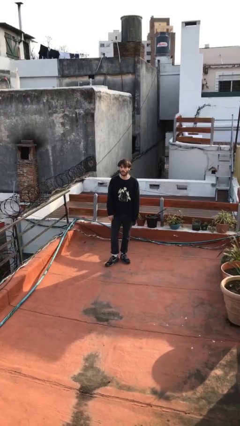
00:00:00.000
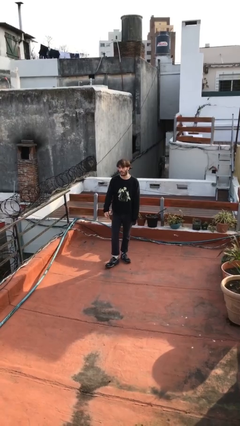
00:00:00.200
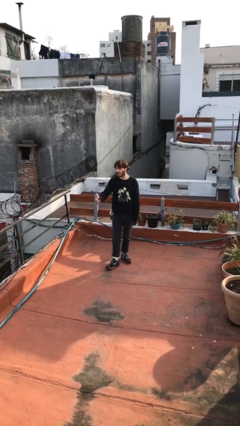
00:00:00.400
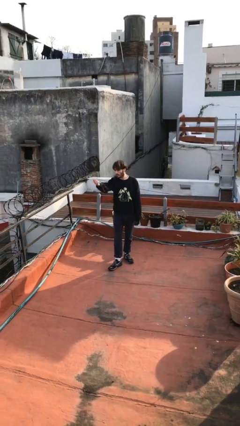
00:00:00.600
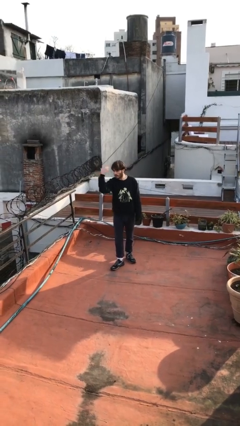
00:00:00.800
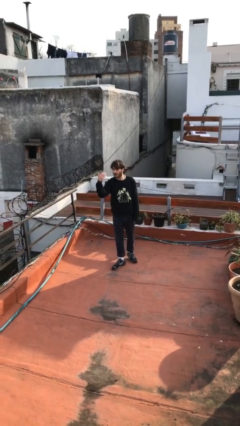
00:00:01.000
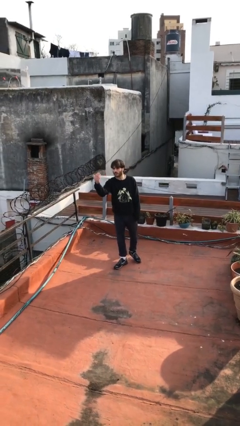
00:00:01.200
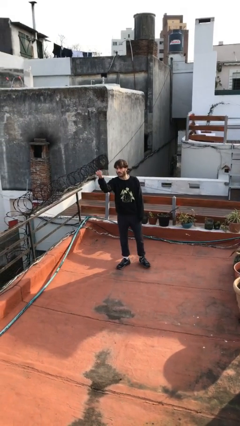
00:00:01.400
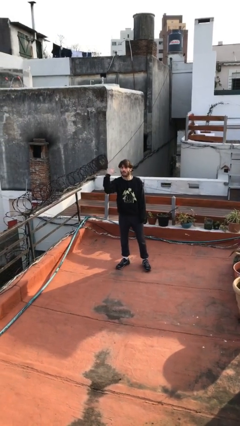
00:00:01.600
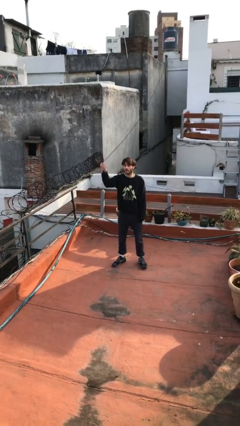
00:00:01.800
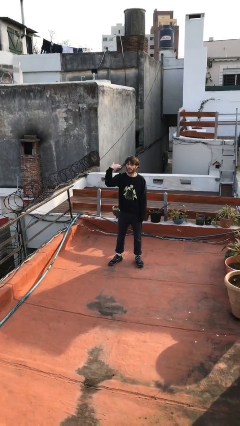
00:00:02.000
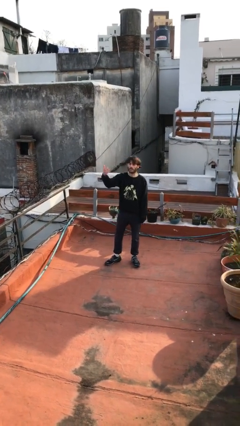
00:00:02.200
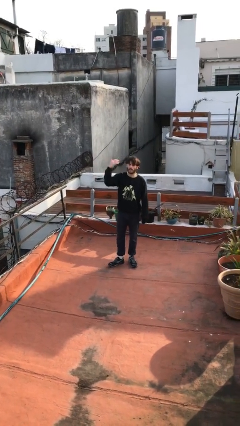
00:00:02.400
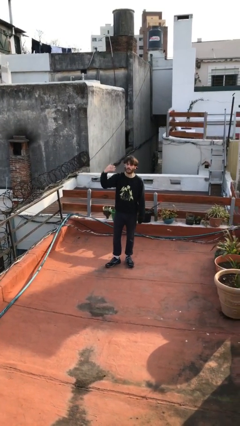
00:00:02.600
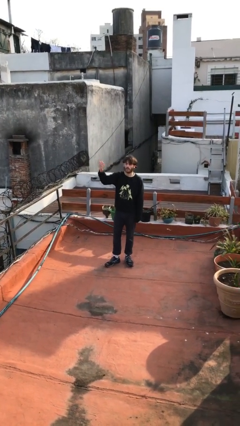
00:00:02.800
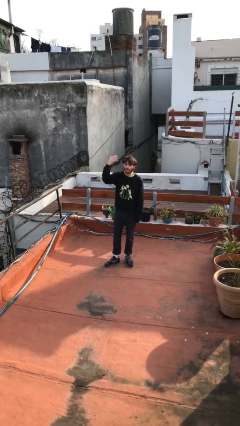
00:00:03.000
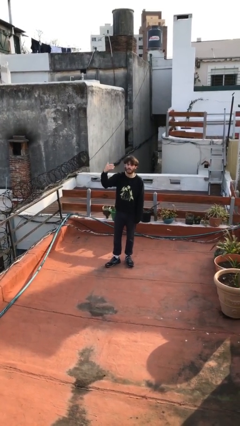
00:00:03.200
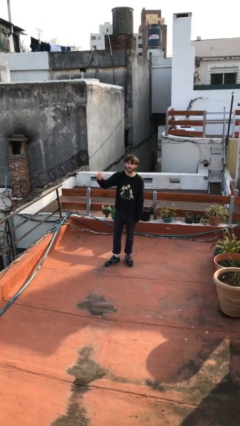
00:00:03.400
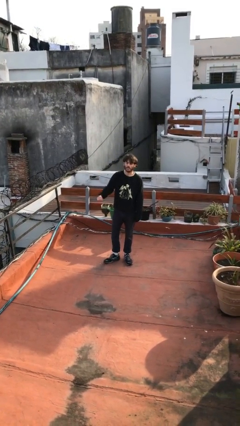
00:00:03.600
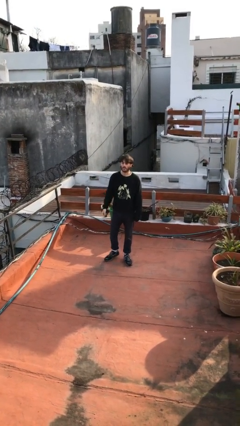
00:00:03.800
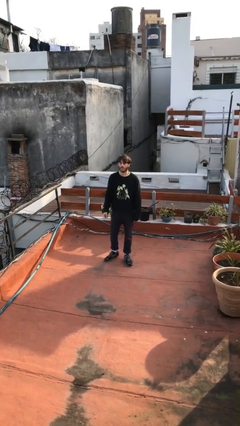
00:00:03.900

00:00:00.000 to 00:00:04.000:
person gestures come here

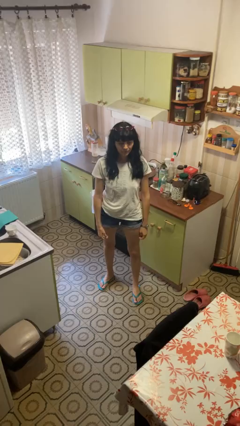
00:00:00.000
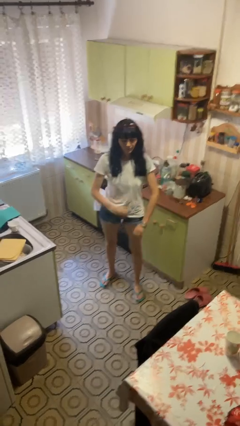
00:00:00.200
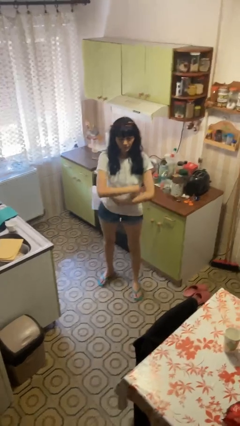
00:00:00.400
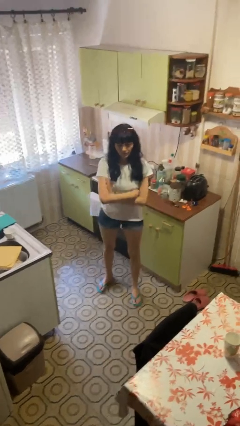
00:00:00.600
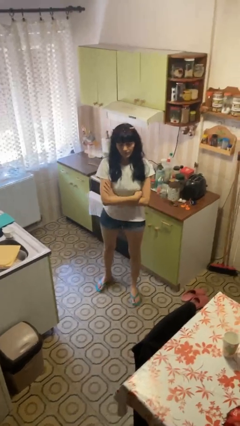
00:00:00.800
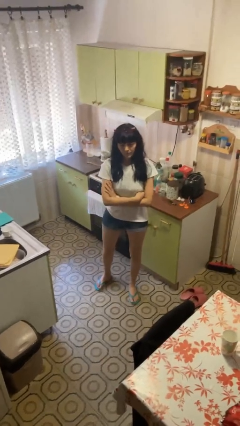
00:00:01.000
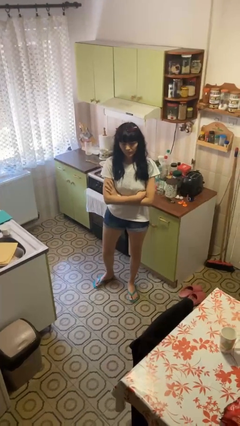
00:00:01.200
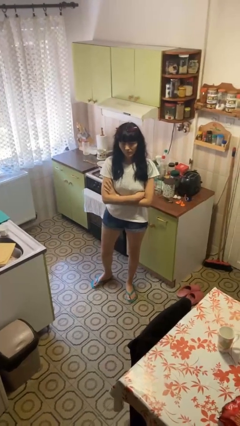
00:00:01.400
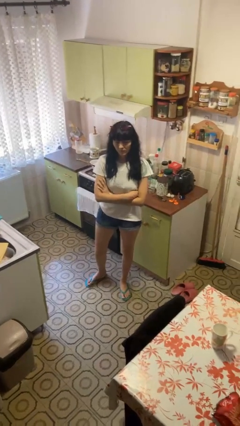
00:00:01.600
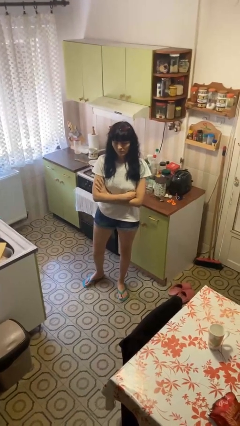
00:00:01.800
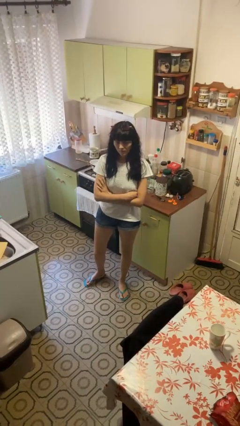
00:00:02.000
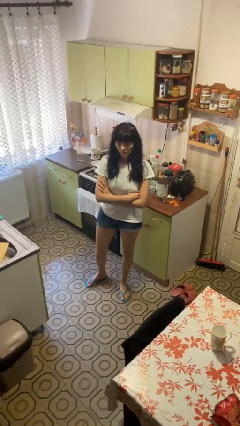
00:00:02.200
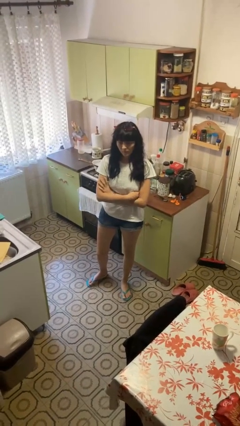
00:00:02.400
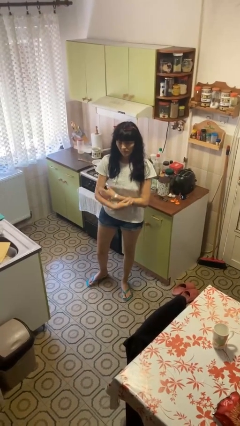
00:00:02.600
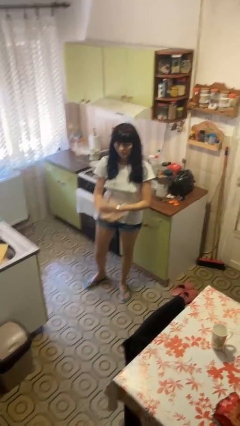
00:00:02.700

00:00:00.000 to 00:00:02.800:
person crosses arms

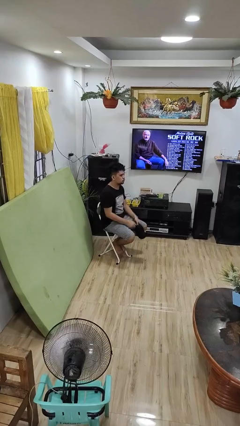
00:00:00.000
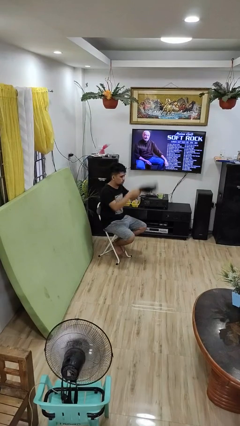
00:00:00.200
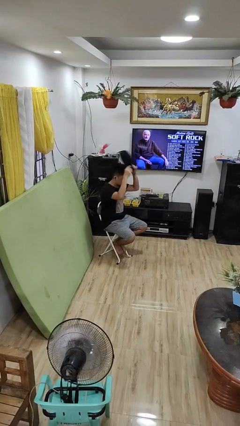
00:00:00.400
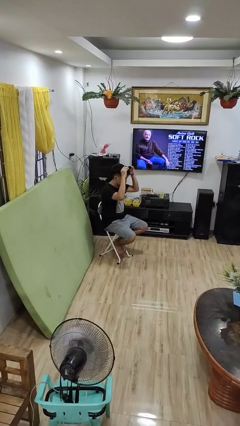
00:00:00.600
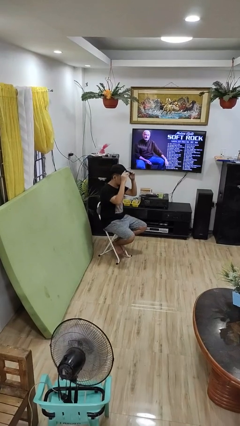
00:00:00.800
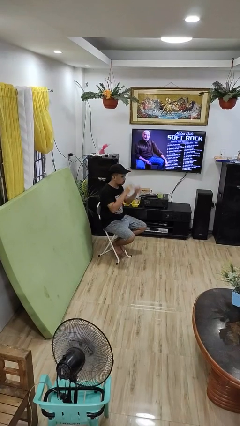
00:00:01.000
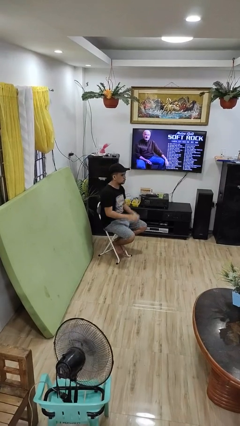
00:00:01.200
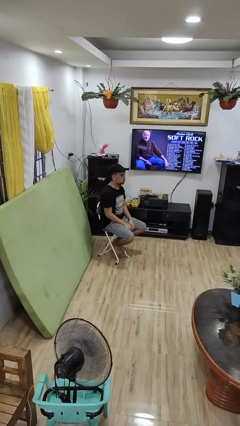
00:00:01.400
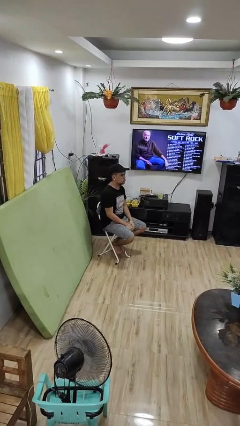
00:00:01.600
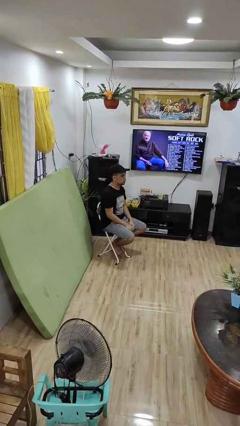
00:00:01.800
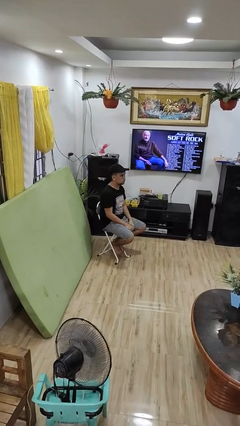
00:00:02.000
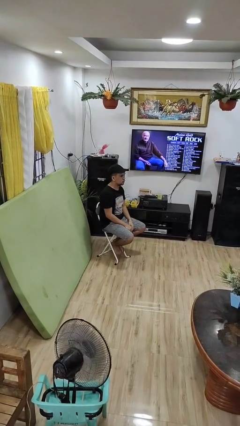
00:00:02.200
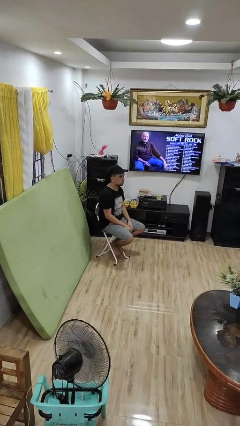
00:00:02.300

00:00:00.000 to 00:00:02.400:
person puts on hat

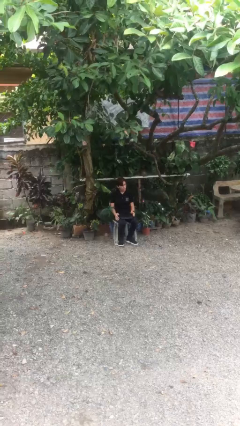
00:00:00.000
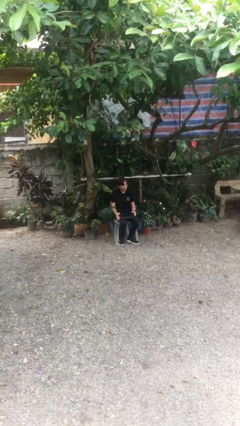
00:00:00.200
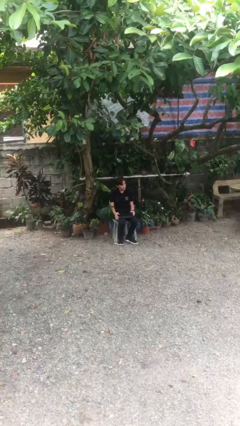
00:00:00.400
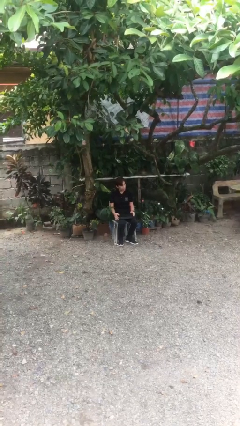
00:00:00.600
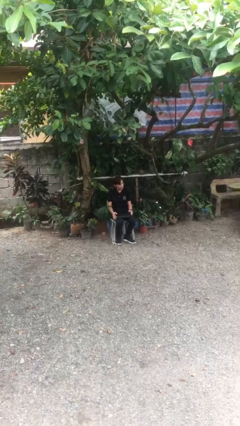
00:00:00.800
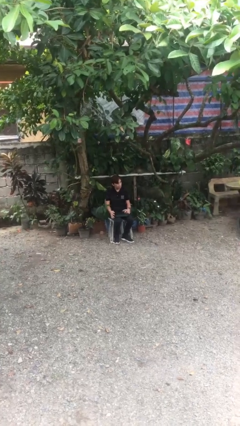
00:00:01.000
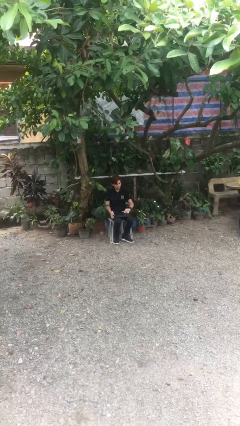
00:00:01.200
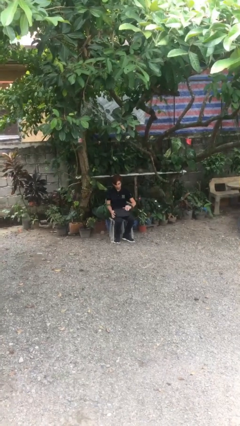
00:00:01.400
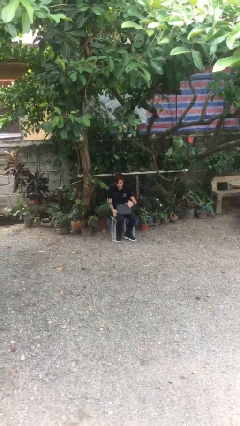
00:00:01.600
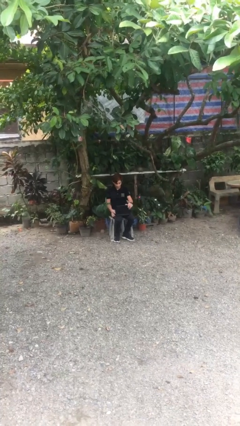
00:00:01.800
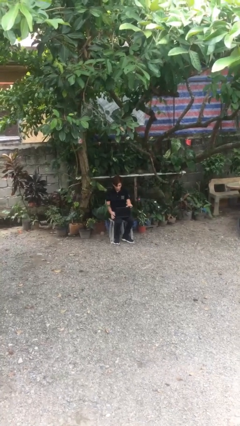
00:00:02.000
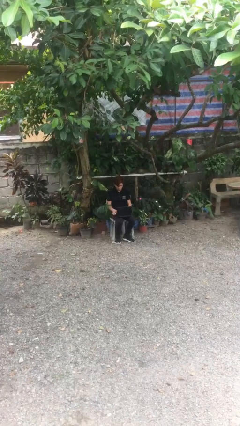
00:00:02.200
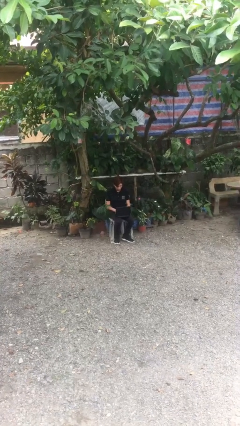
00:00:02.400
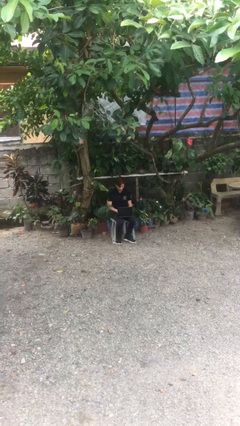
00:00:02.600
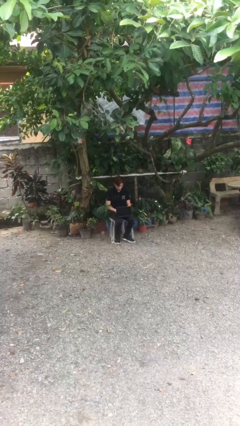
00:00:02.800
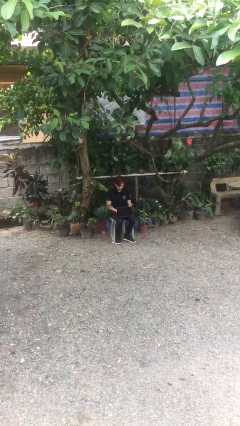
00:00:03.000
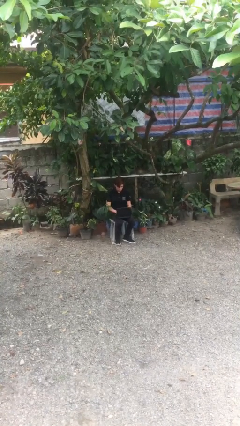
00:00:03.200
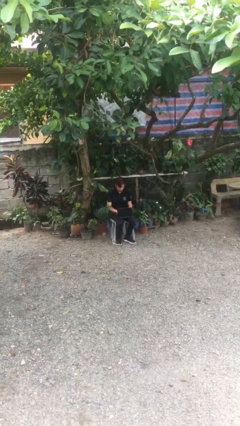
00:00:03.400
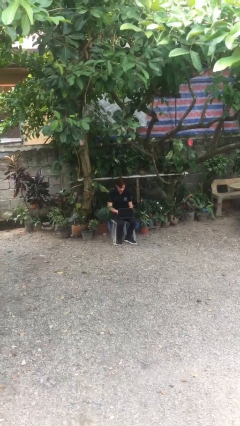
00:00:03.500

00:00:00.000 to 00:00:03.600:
person interacts with laptop

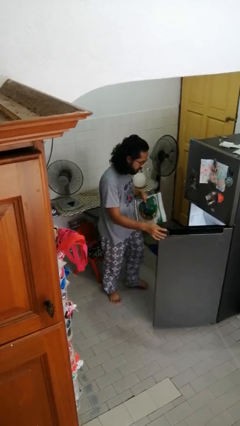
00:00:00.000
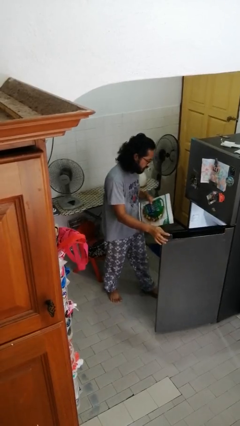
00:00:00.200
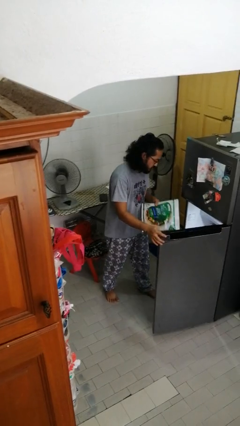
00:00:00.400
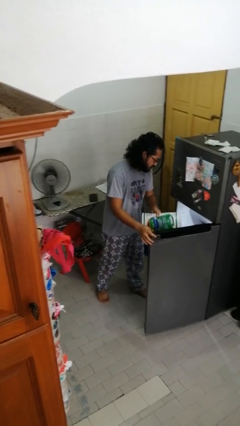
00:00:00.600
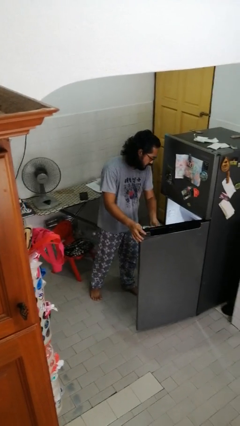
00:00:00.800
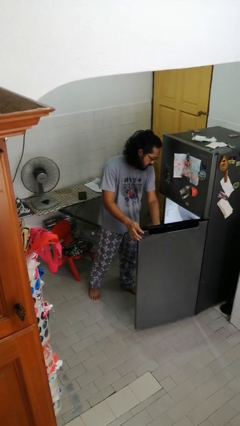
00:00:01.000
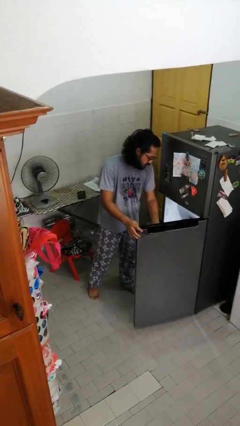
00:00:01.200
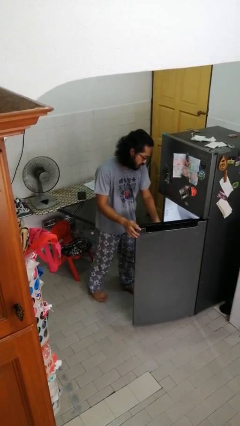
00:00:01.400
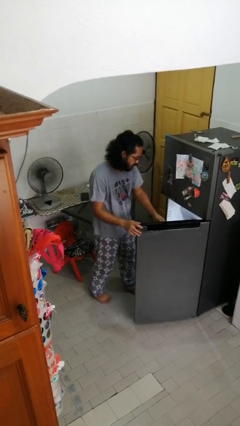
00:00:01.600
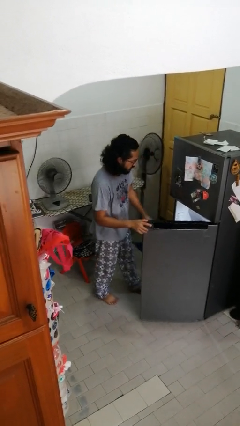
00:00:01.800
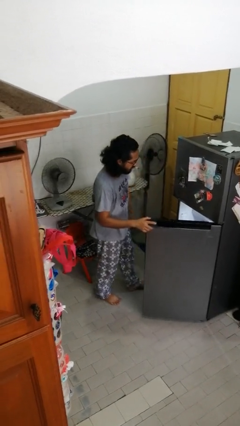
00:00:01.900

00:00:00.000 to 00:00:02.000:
person puts object into refrigerator

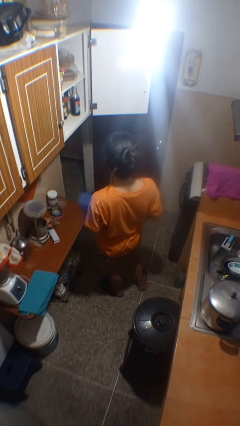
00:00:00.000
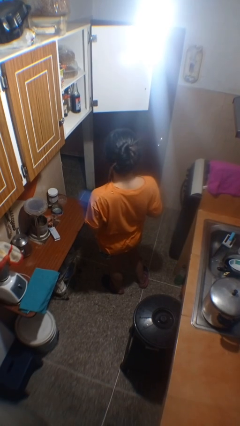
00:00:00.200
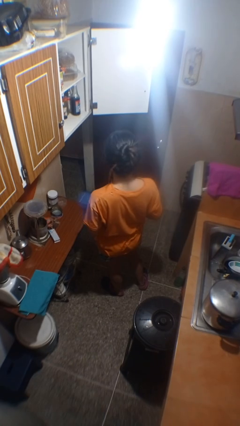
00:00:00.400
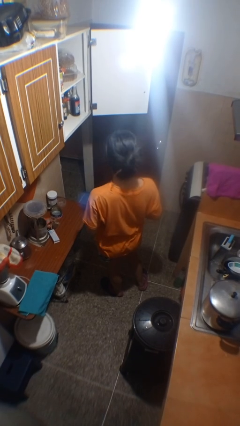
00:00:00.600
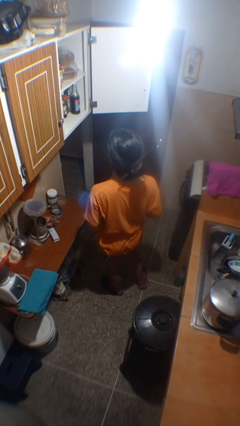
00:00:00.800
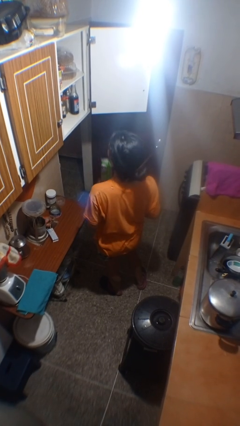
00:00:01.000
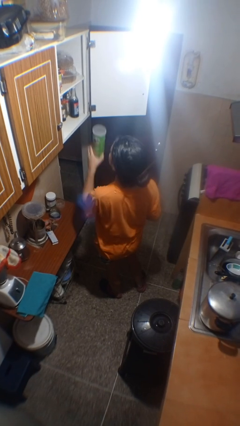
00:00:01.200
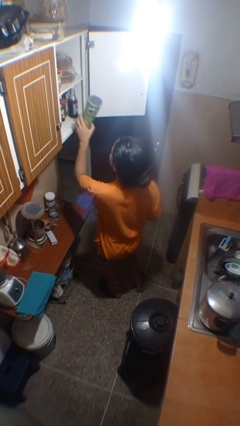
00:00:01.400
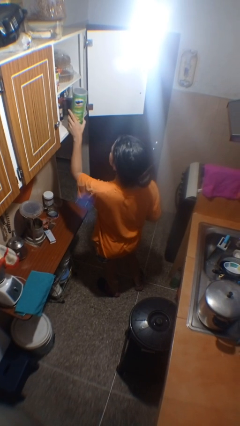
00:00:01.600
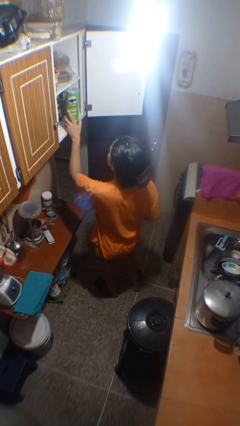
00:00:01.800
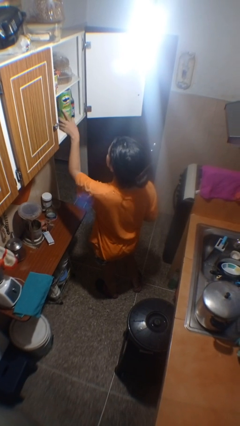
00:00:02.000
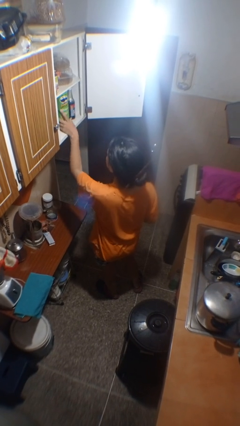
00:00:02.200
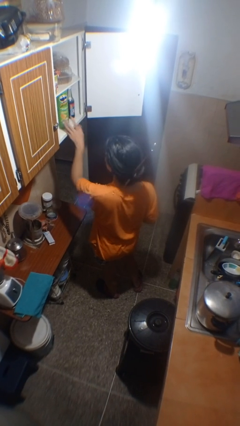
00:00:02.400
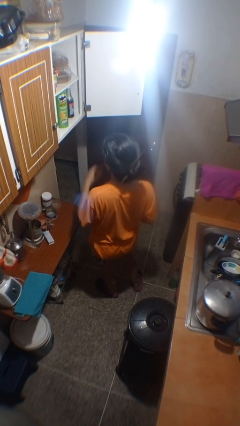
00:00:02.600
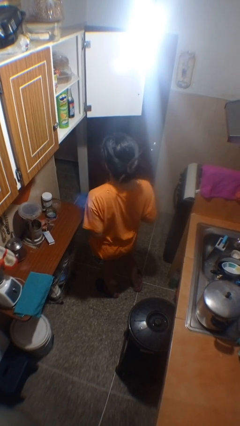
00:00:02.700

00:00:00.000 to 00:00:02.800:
person puts object in cabinet
